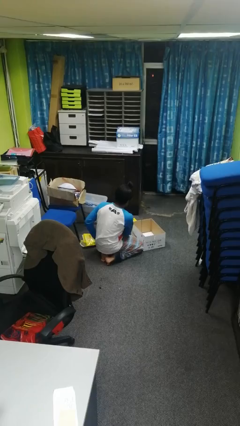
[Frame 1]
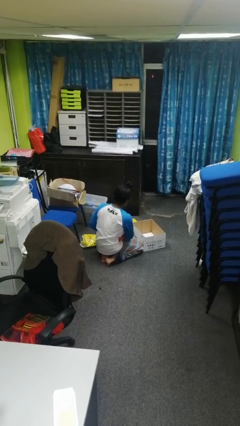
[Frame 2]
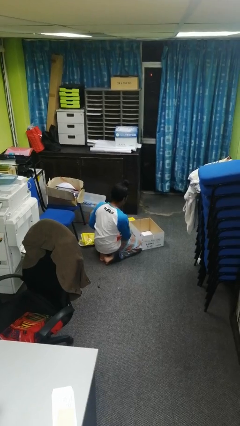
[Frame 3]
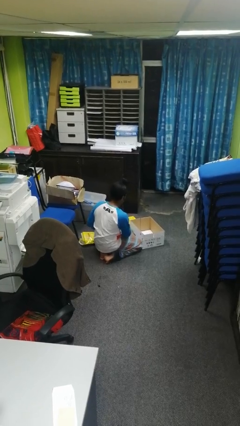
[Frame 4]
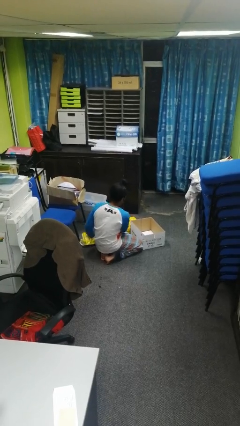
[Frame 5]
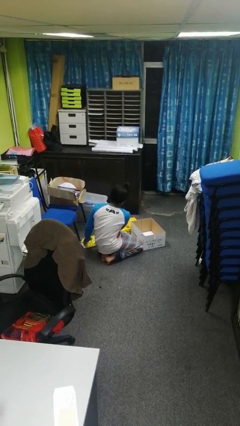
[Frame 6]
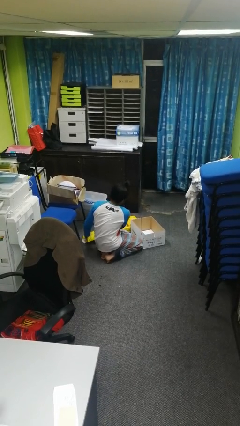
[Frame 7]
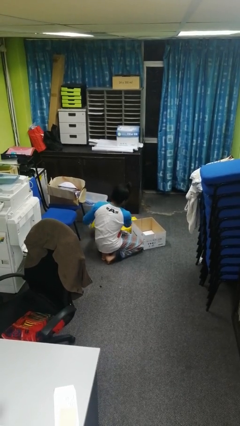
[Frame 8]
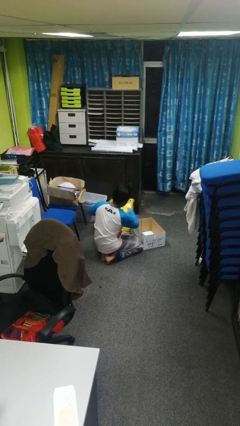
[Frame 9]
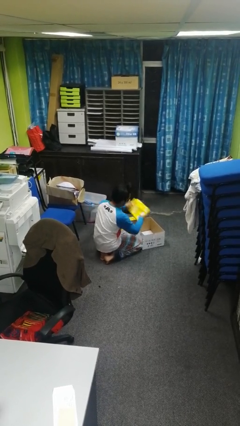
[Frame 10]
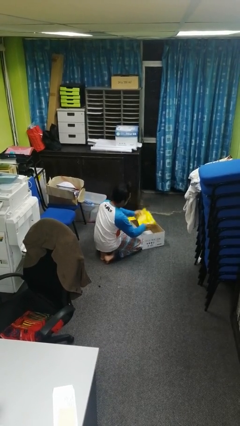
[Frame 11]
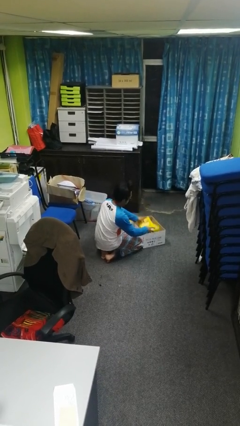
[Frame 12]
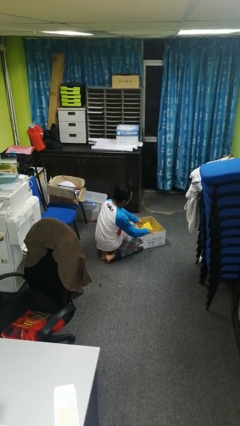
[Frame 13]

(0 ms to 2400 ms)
person puts object into box

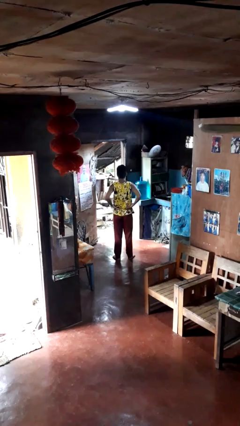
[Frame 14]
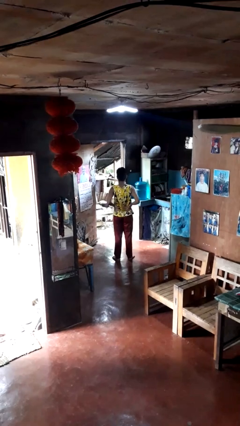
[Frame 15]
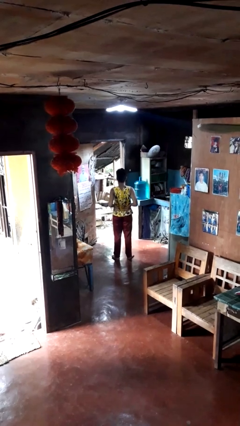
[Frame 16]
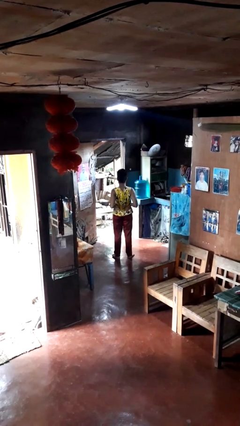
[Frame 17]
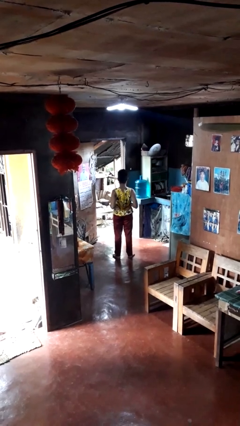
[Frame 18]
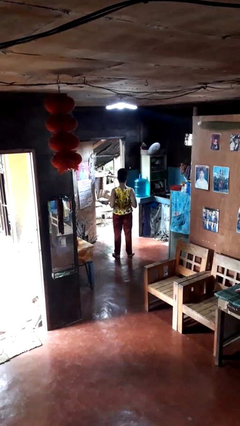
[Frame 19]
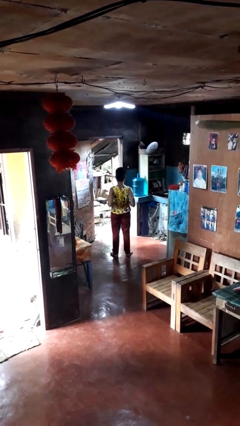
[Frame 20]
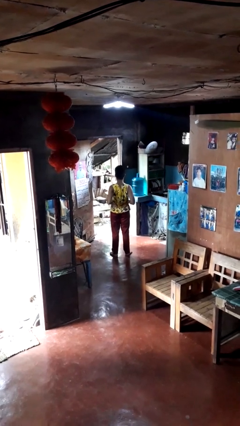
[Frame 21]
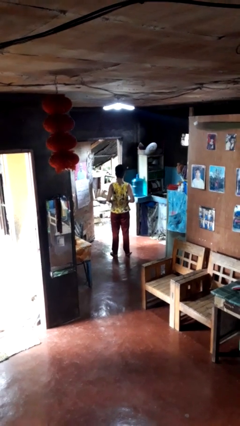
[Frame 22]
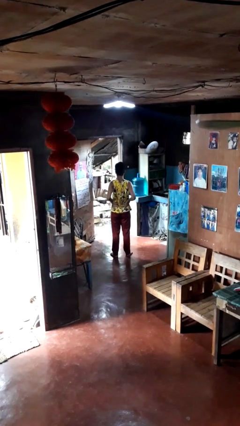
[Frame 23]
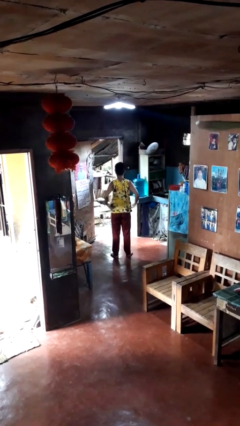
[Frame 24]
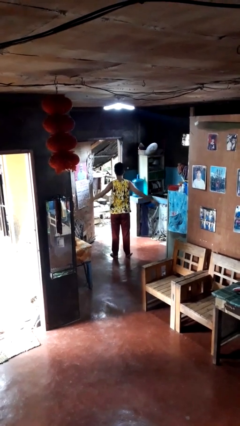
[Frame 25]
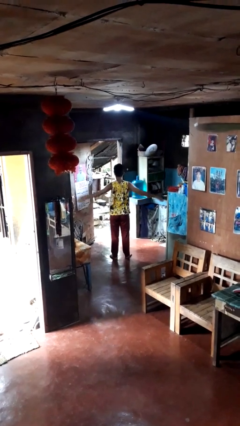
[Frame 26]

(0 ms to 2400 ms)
person stretches back

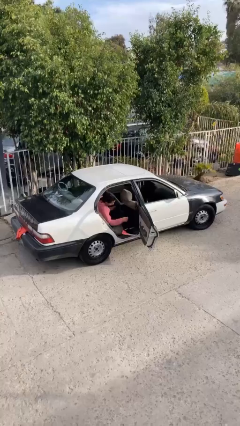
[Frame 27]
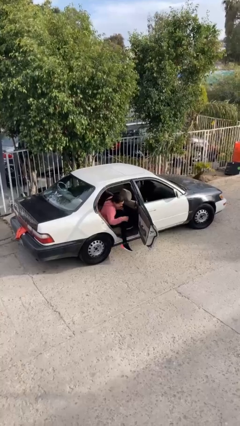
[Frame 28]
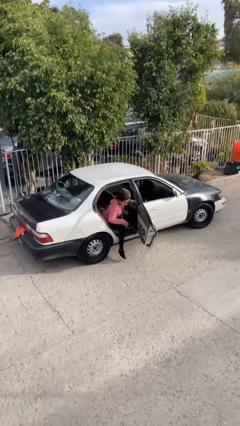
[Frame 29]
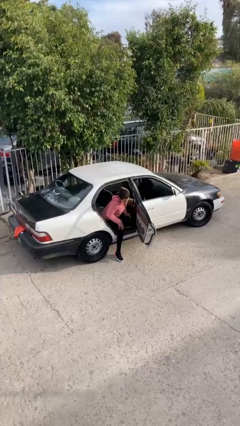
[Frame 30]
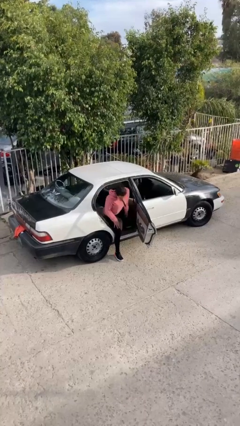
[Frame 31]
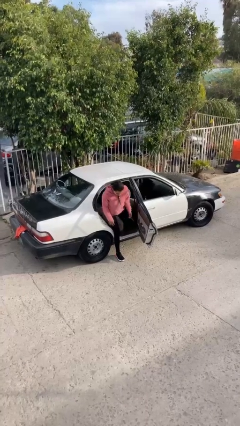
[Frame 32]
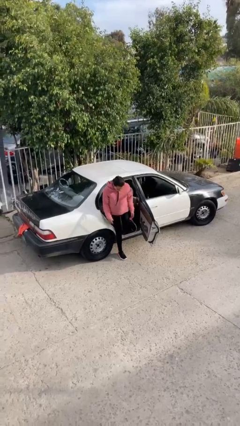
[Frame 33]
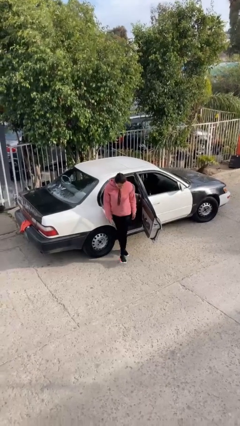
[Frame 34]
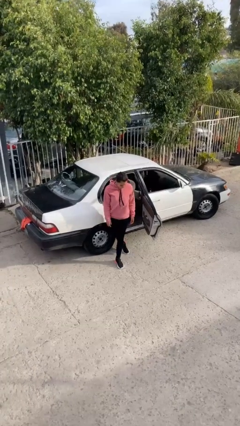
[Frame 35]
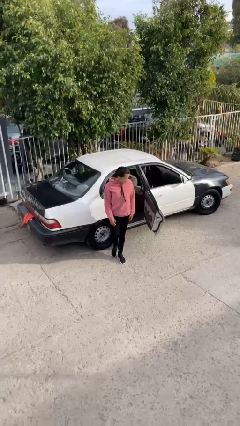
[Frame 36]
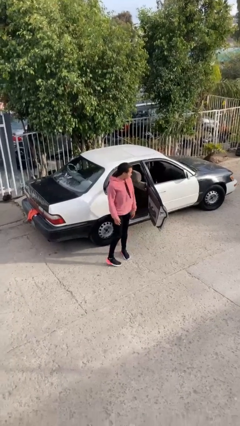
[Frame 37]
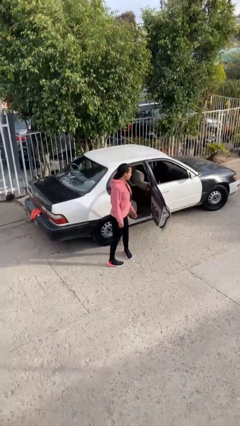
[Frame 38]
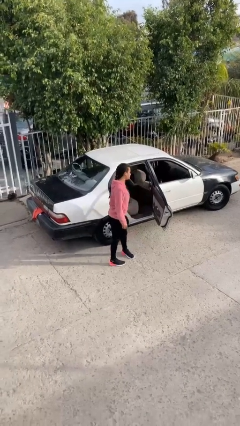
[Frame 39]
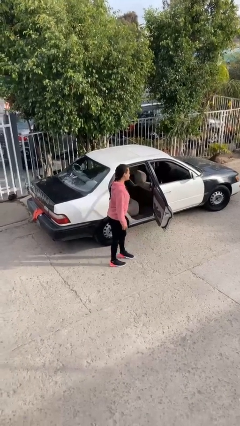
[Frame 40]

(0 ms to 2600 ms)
person exits car

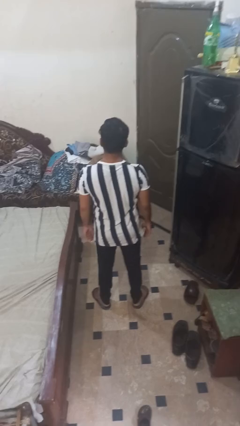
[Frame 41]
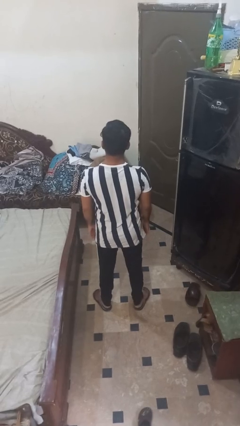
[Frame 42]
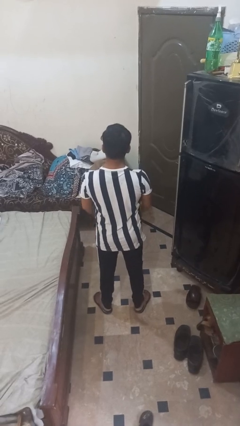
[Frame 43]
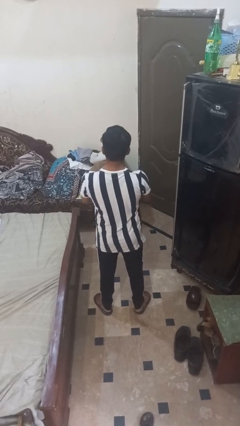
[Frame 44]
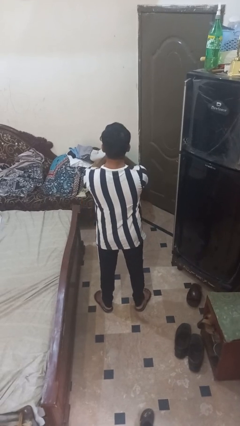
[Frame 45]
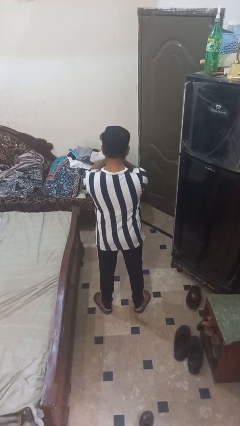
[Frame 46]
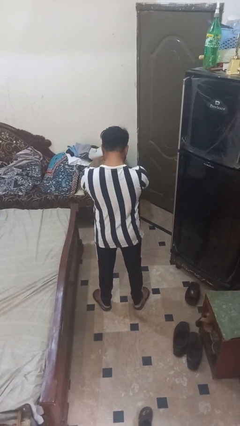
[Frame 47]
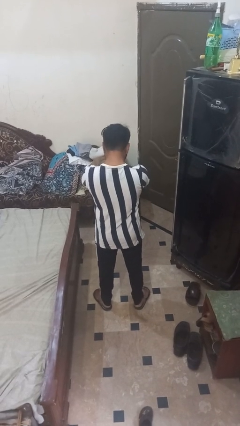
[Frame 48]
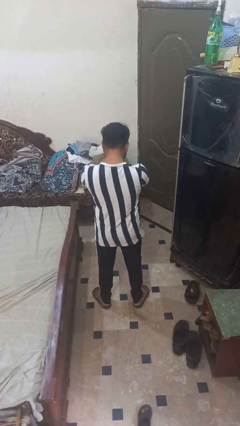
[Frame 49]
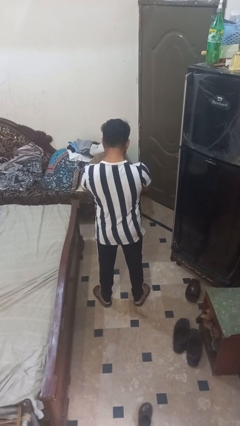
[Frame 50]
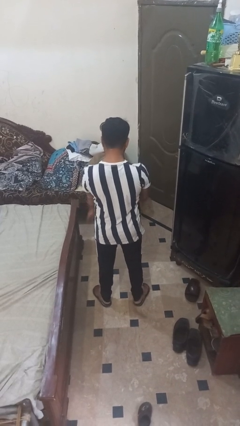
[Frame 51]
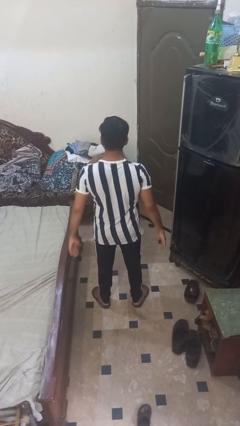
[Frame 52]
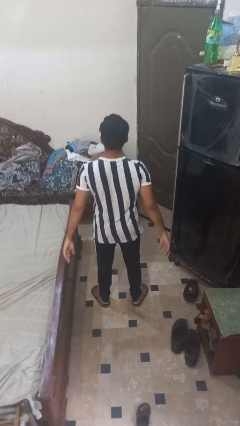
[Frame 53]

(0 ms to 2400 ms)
person sneezes into hand

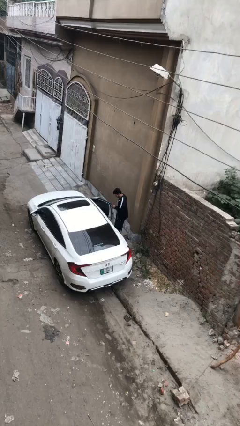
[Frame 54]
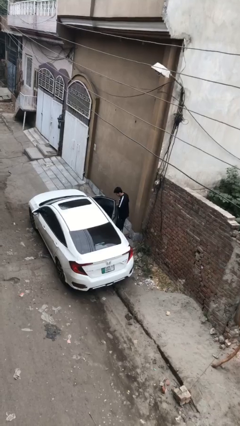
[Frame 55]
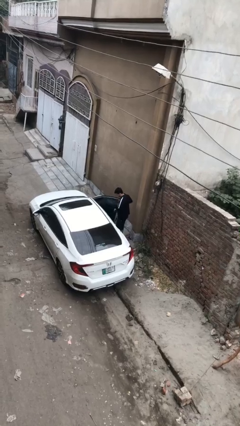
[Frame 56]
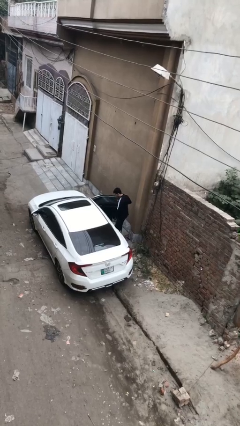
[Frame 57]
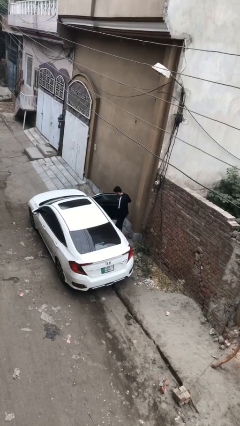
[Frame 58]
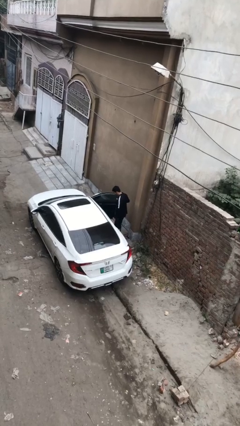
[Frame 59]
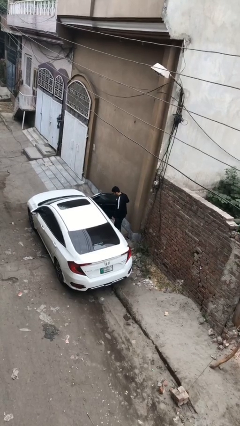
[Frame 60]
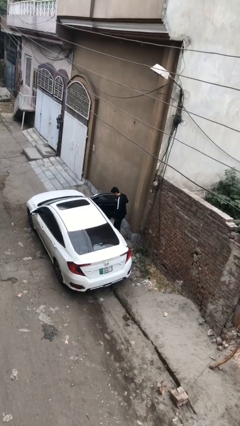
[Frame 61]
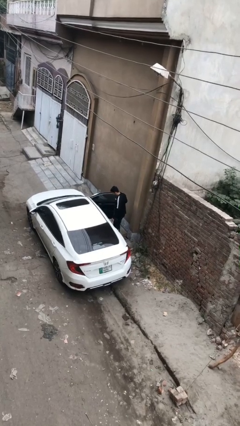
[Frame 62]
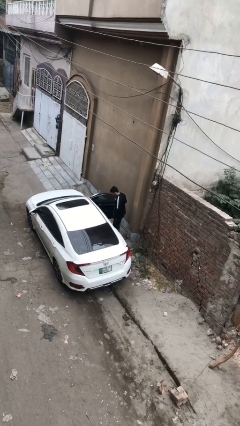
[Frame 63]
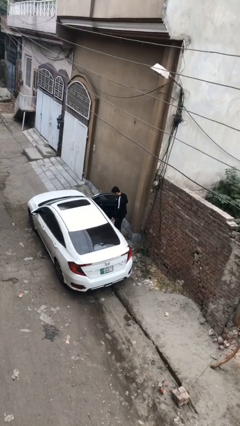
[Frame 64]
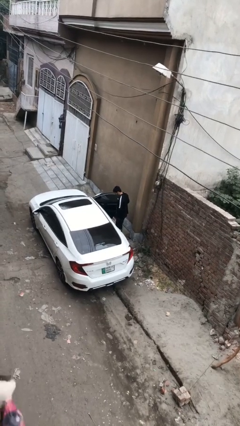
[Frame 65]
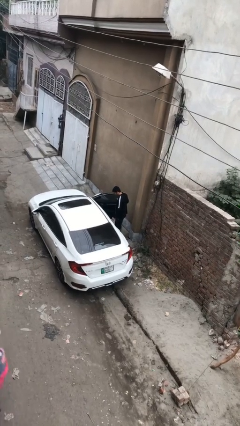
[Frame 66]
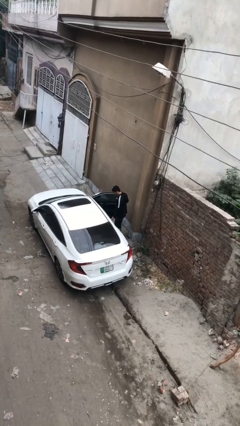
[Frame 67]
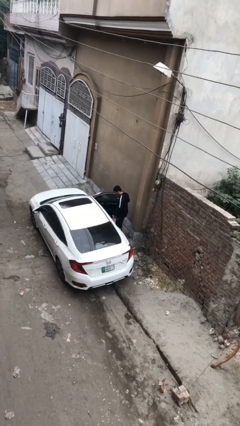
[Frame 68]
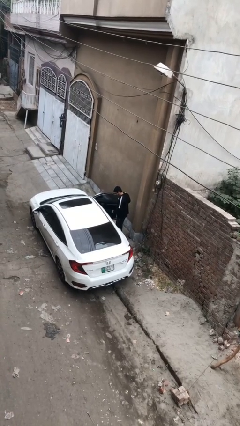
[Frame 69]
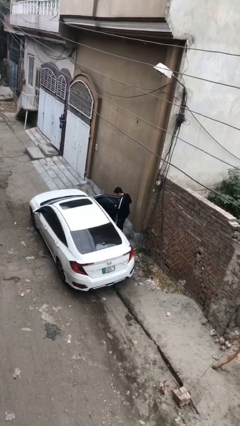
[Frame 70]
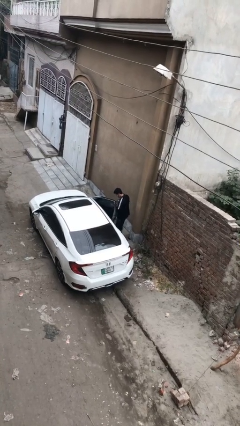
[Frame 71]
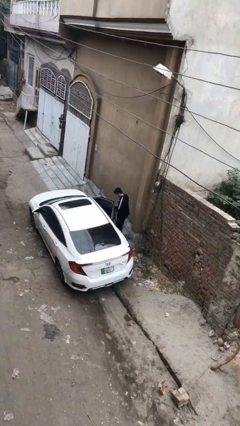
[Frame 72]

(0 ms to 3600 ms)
person opens car door

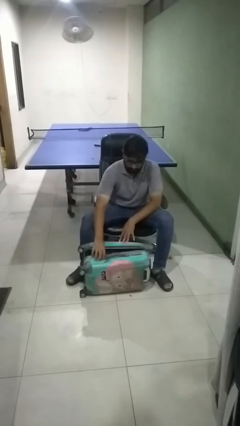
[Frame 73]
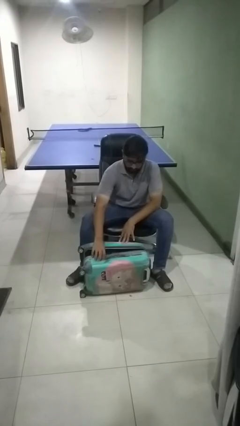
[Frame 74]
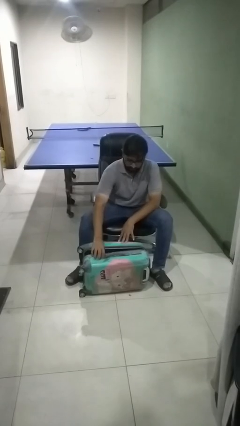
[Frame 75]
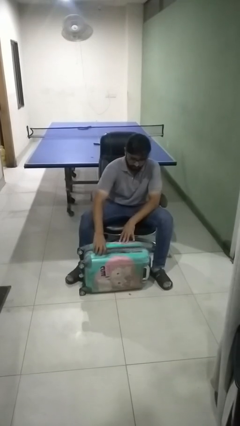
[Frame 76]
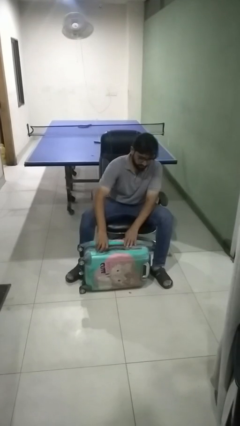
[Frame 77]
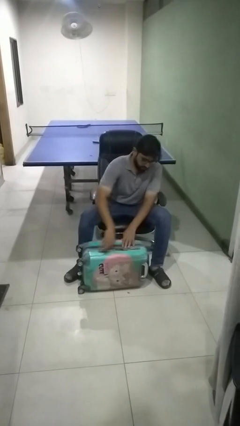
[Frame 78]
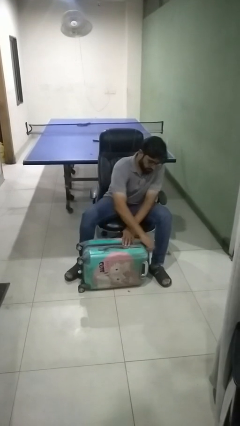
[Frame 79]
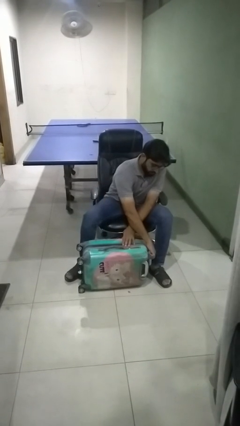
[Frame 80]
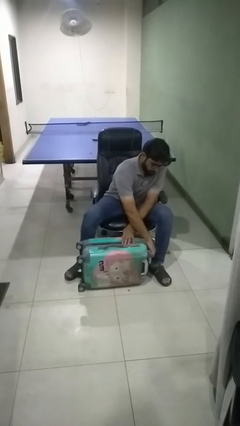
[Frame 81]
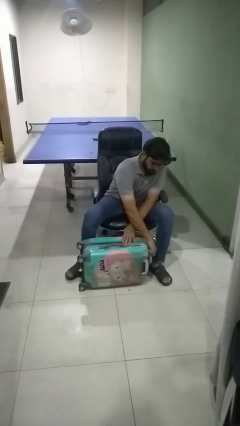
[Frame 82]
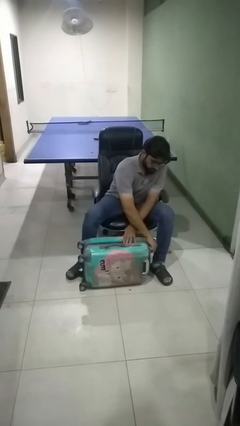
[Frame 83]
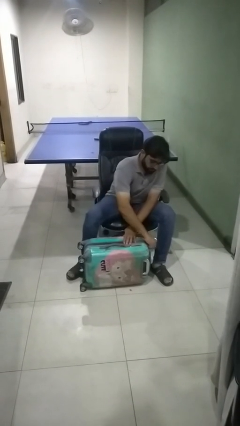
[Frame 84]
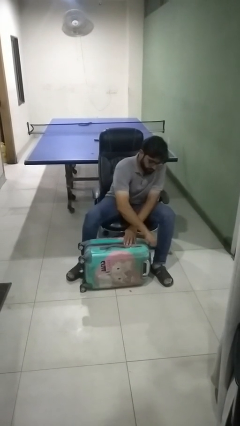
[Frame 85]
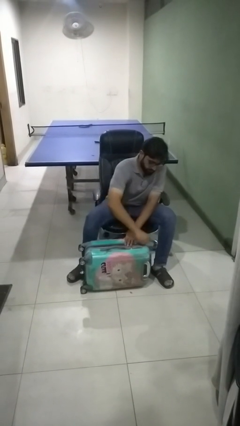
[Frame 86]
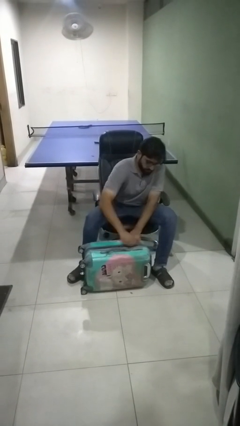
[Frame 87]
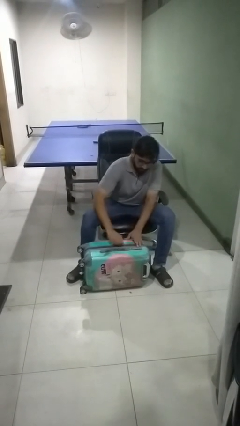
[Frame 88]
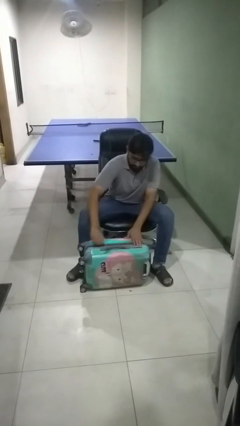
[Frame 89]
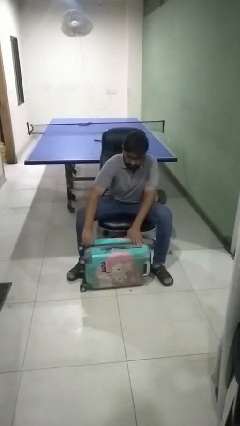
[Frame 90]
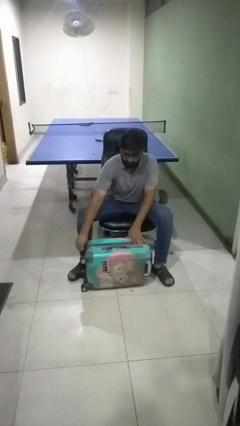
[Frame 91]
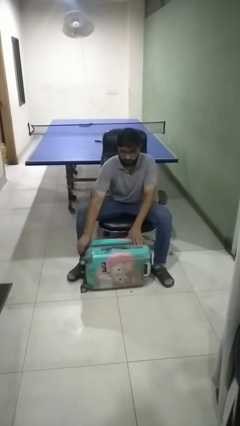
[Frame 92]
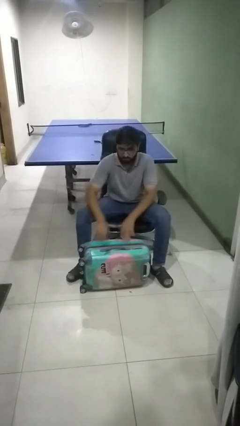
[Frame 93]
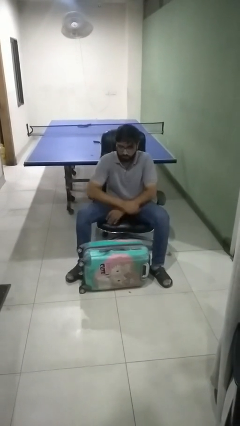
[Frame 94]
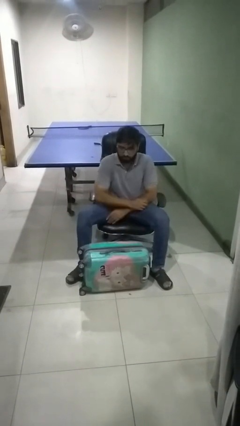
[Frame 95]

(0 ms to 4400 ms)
person closes suitcase
